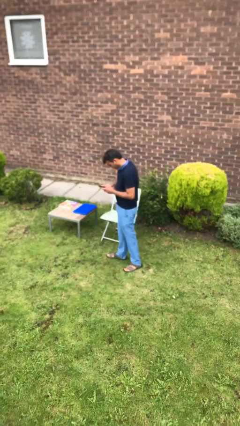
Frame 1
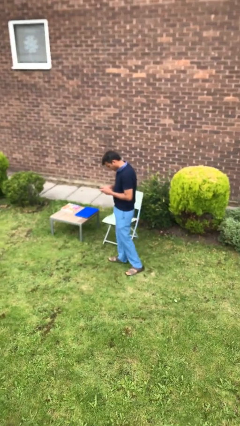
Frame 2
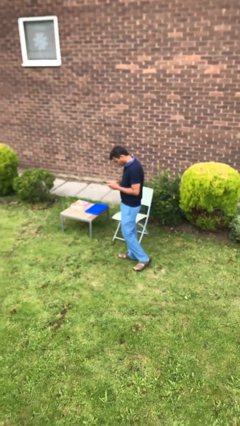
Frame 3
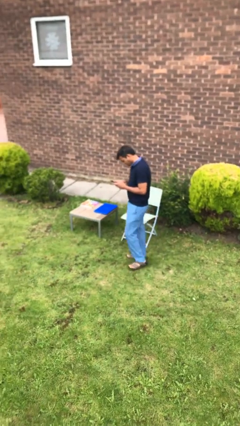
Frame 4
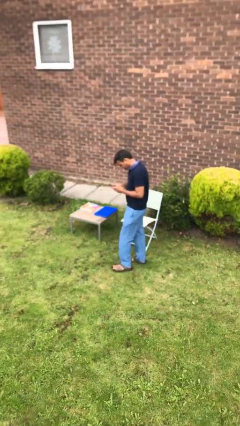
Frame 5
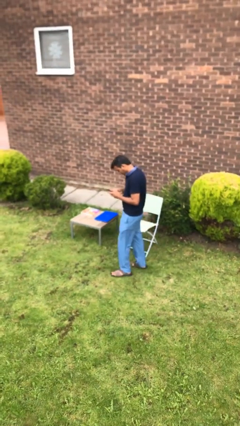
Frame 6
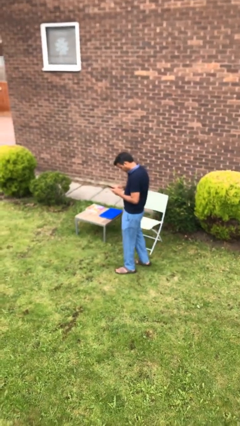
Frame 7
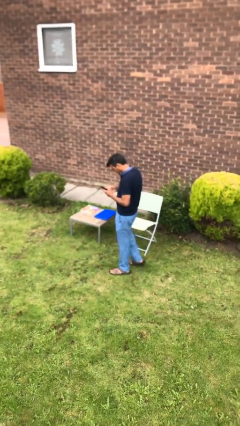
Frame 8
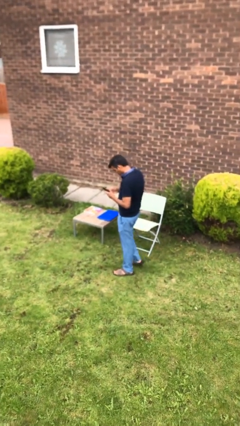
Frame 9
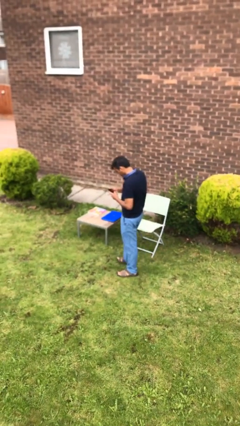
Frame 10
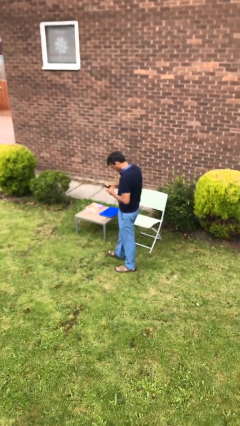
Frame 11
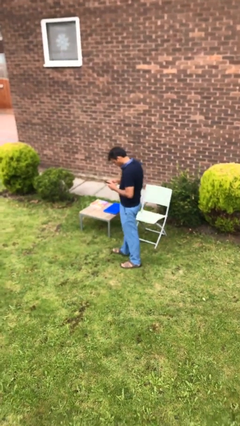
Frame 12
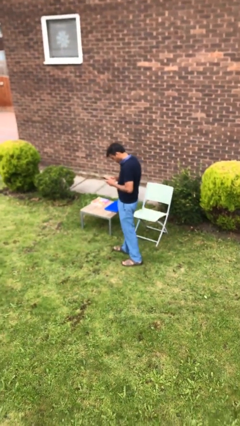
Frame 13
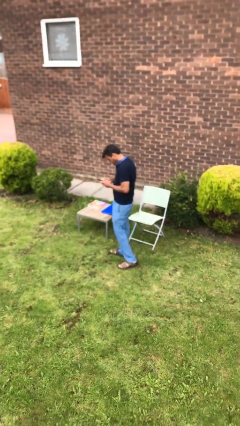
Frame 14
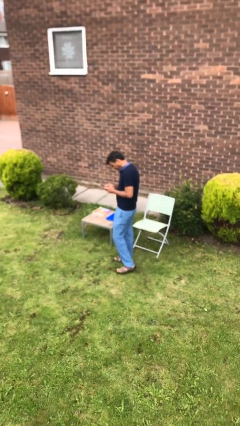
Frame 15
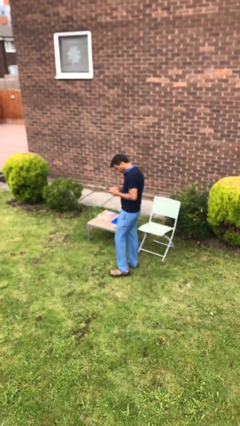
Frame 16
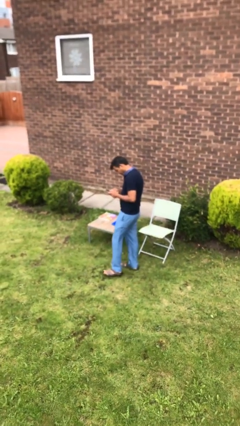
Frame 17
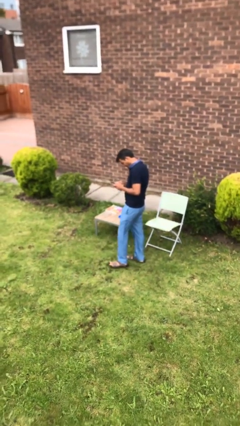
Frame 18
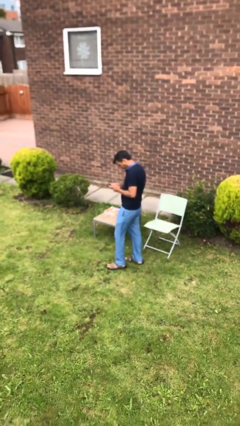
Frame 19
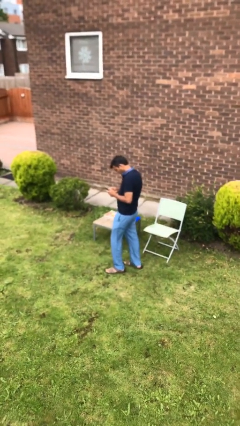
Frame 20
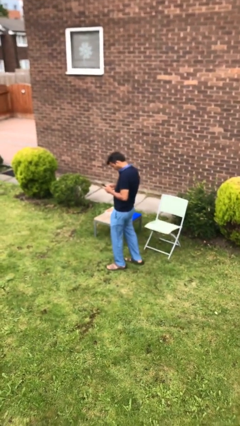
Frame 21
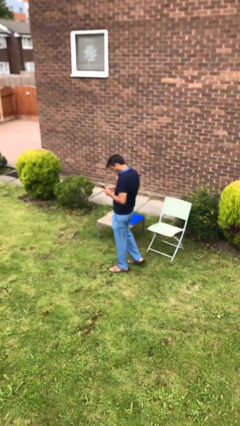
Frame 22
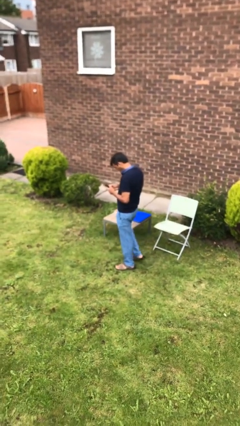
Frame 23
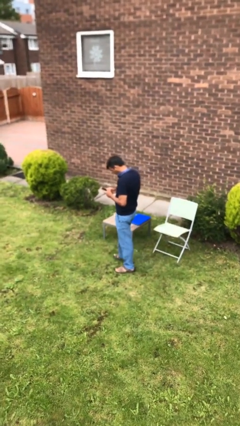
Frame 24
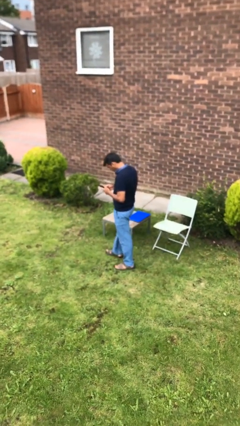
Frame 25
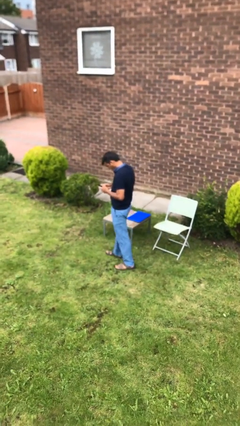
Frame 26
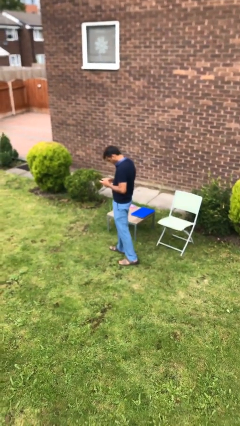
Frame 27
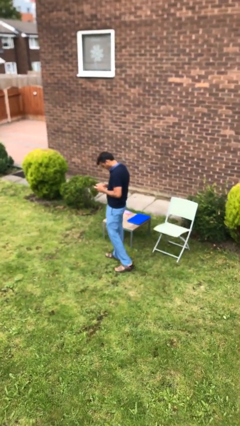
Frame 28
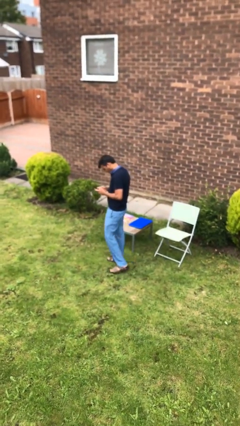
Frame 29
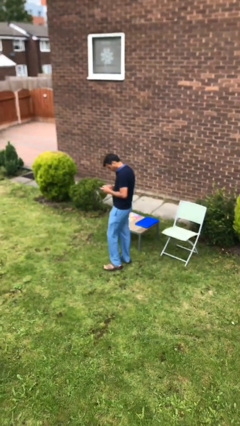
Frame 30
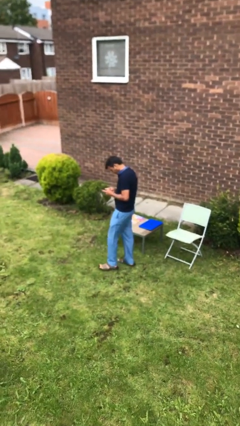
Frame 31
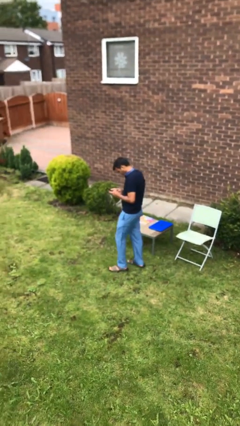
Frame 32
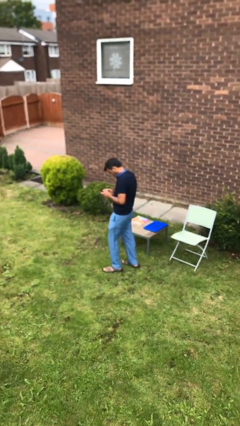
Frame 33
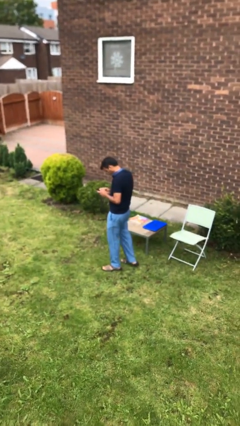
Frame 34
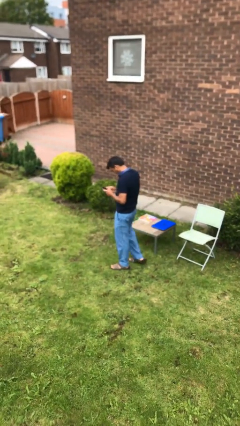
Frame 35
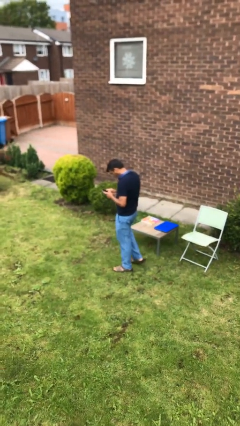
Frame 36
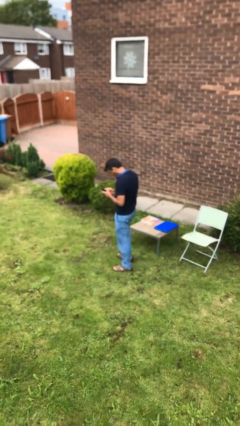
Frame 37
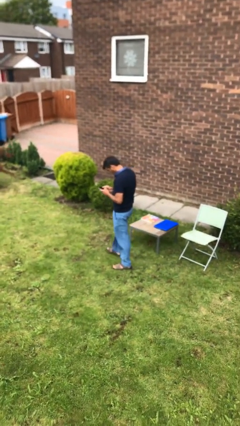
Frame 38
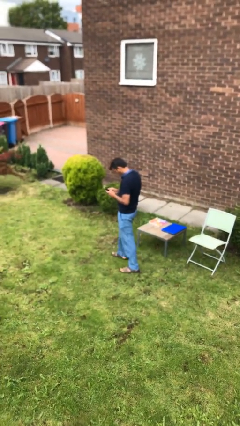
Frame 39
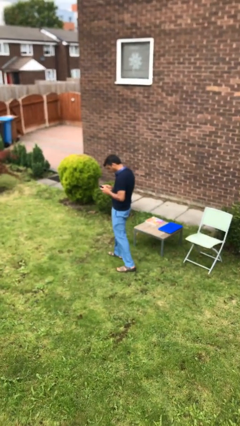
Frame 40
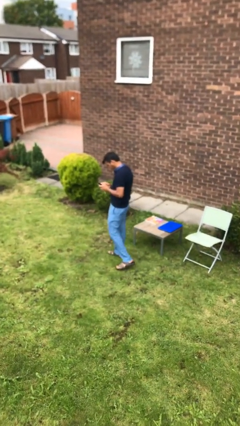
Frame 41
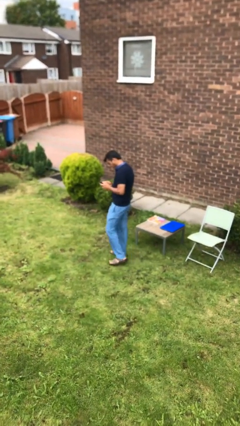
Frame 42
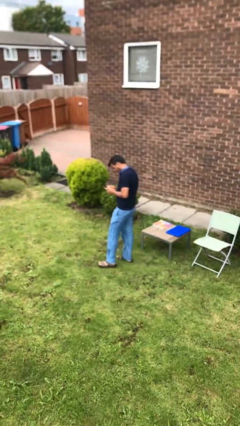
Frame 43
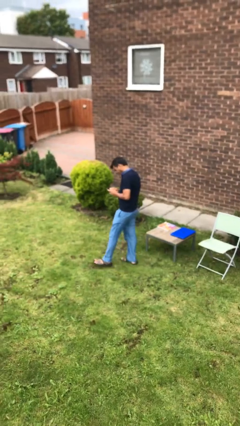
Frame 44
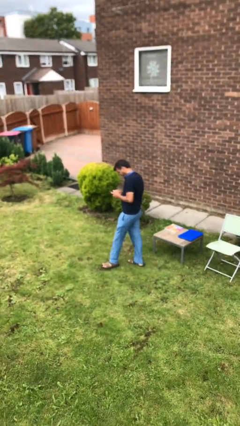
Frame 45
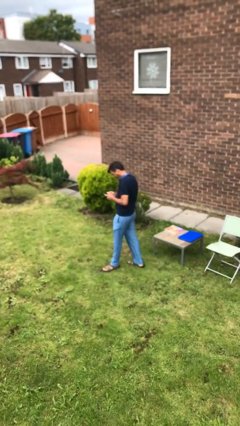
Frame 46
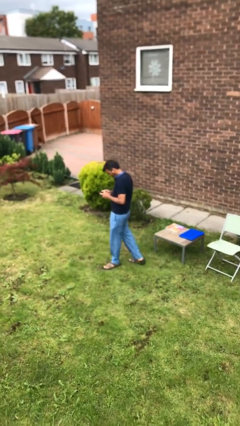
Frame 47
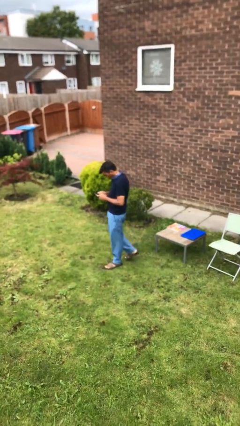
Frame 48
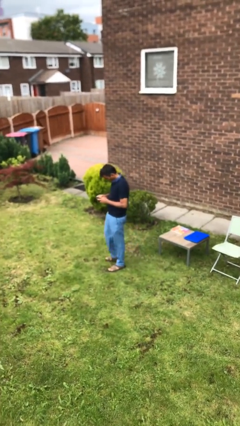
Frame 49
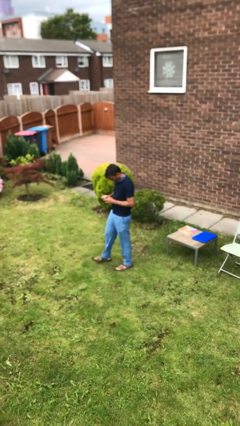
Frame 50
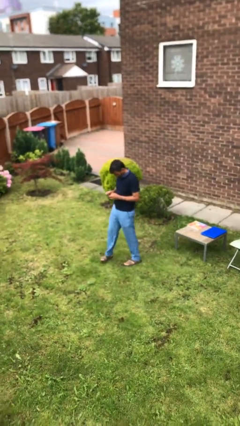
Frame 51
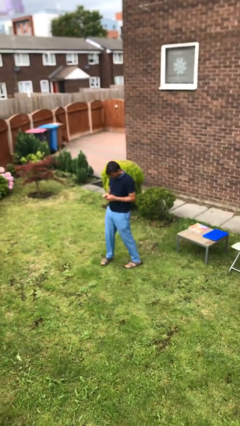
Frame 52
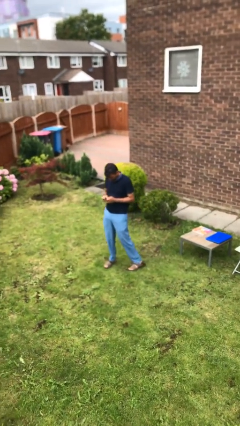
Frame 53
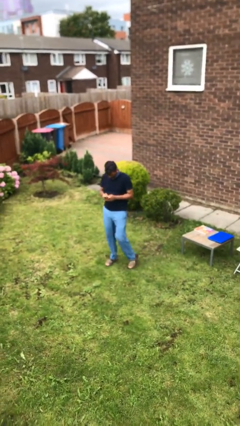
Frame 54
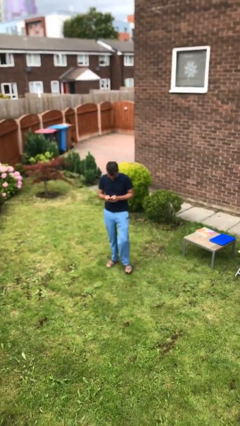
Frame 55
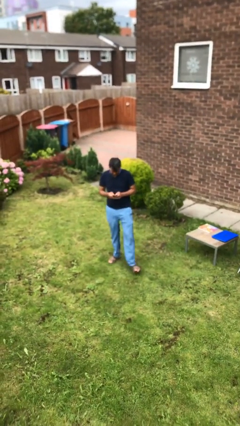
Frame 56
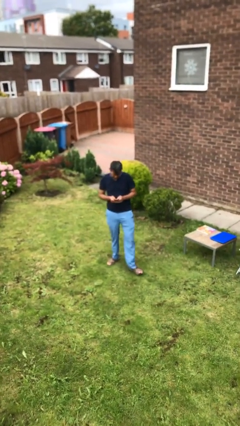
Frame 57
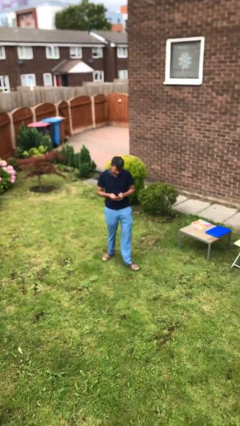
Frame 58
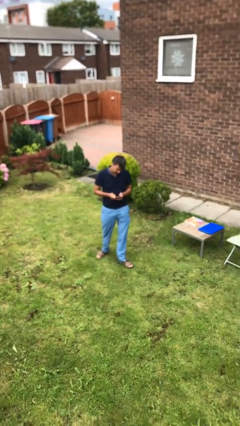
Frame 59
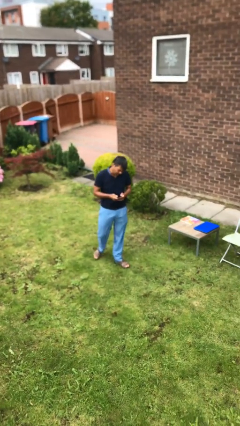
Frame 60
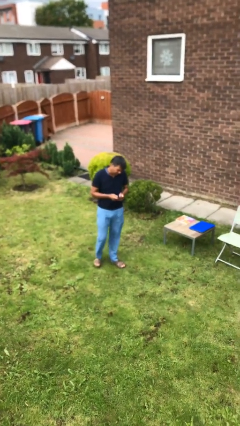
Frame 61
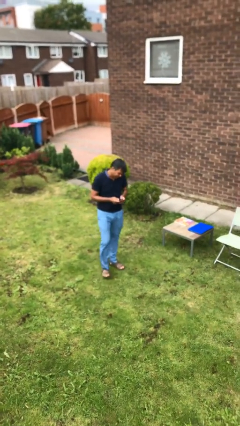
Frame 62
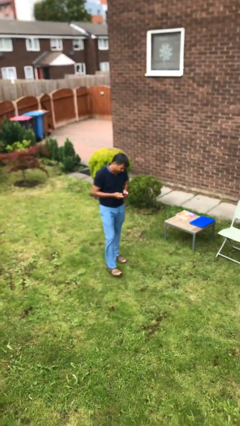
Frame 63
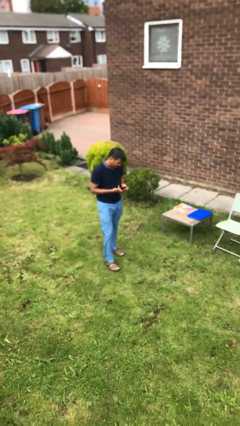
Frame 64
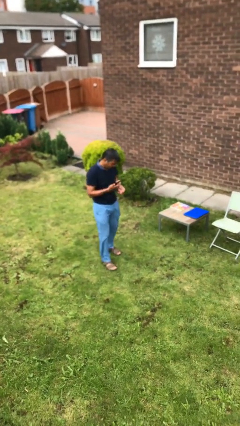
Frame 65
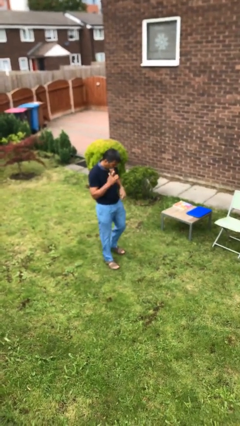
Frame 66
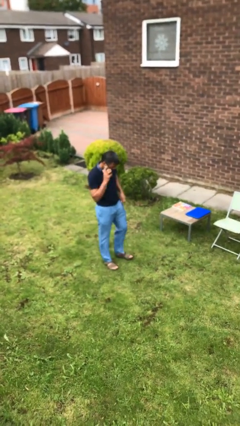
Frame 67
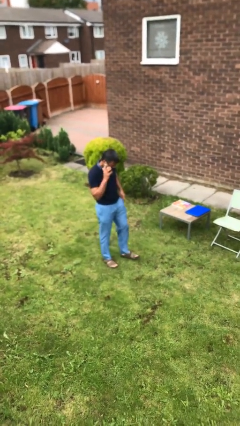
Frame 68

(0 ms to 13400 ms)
person texts on phone

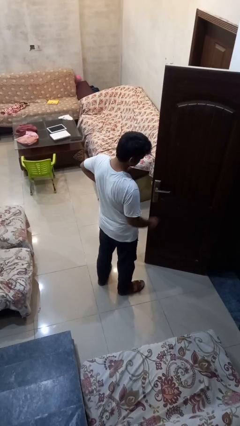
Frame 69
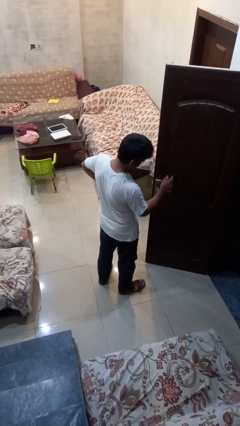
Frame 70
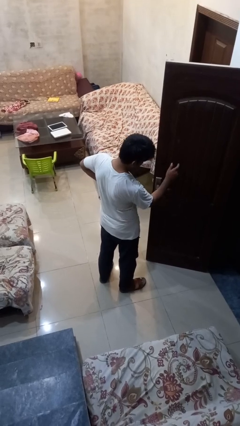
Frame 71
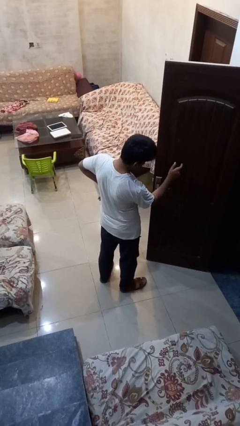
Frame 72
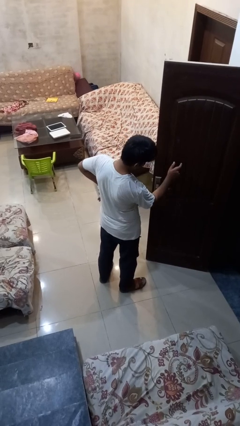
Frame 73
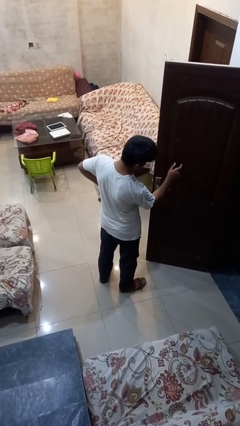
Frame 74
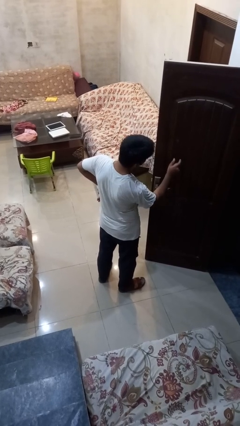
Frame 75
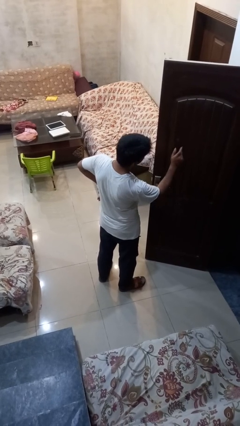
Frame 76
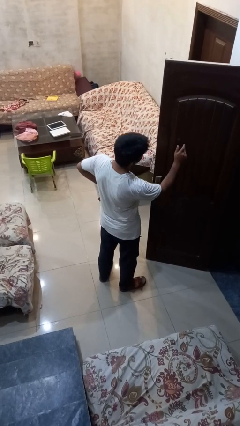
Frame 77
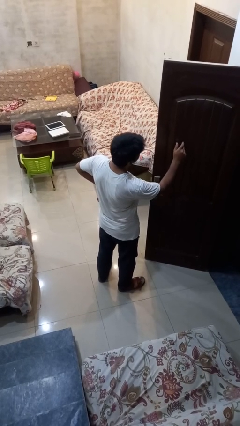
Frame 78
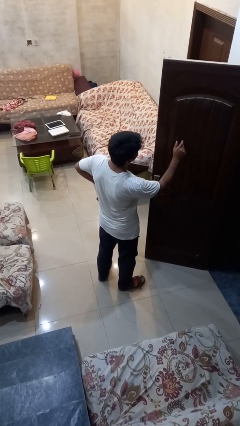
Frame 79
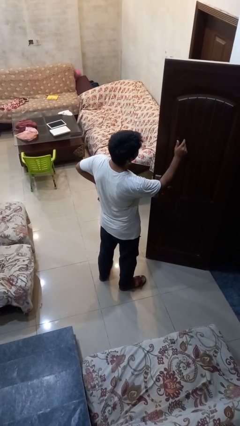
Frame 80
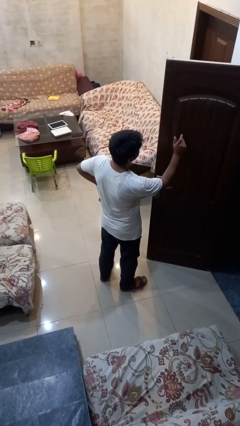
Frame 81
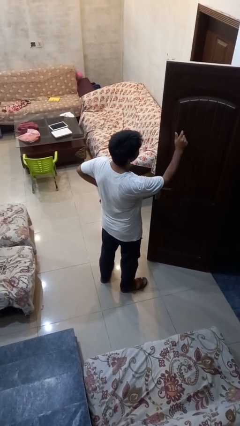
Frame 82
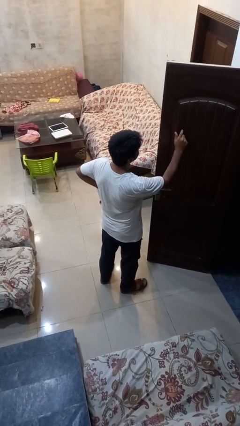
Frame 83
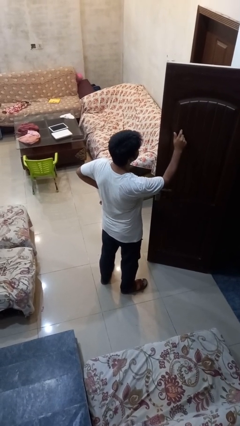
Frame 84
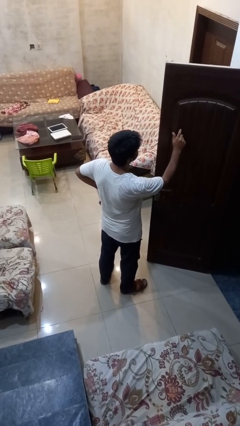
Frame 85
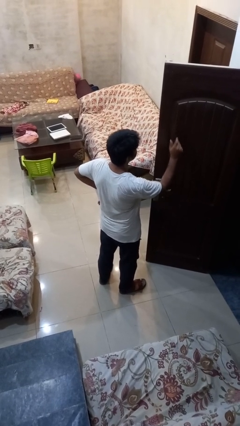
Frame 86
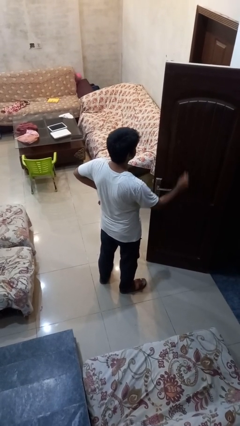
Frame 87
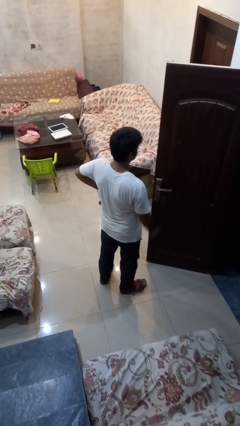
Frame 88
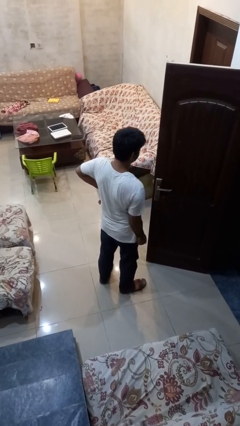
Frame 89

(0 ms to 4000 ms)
person taps object with finger

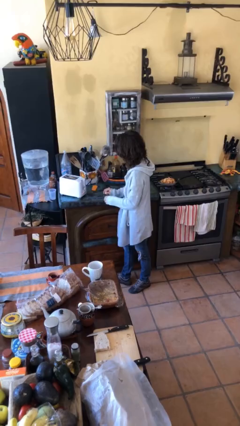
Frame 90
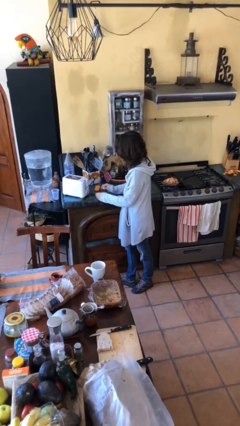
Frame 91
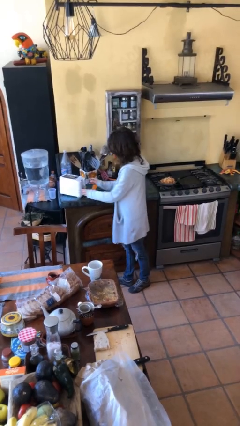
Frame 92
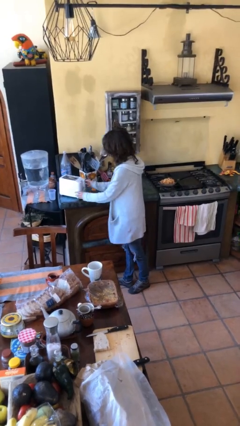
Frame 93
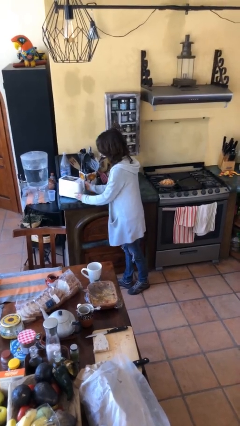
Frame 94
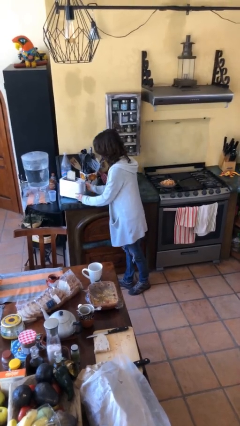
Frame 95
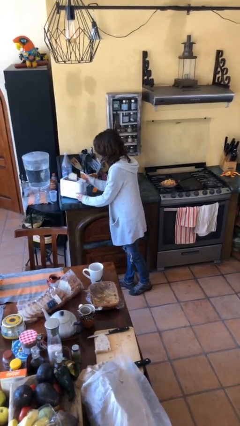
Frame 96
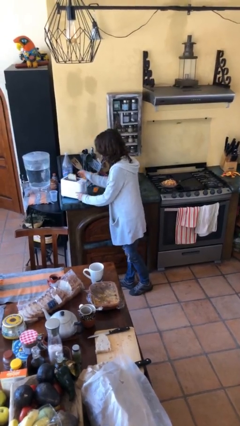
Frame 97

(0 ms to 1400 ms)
person takes object from toaster
